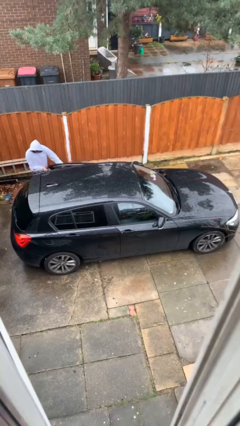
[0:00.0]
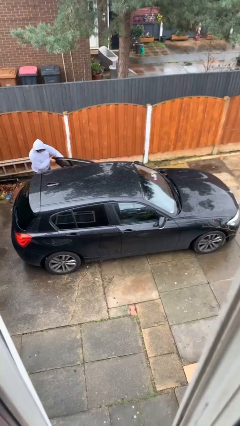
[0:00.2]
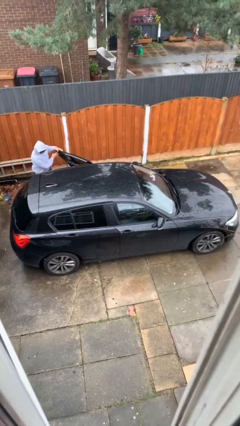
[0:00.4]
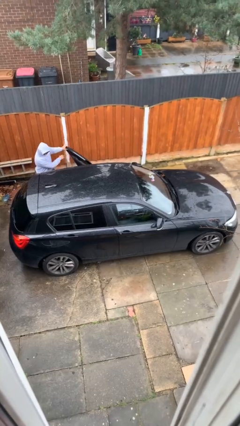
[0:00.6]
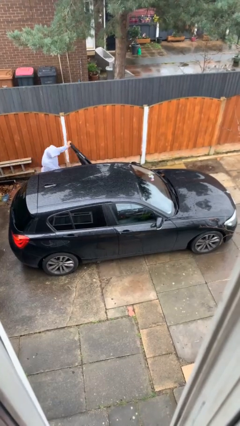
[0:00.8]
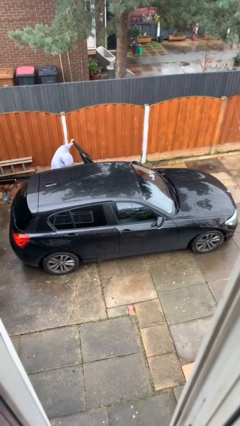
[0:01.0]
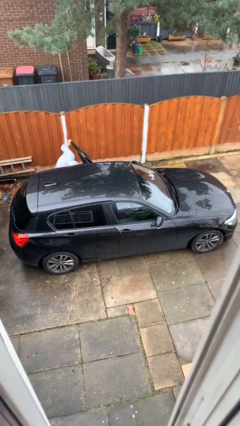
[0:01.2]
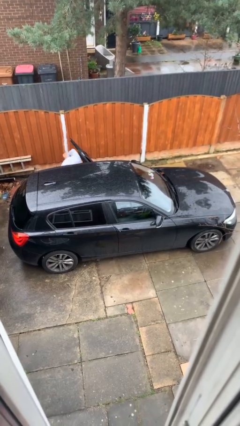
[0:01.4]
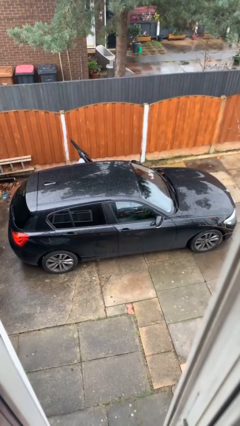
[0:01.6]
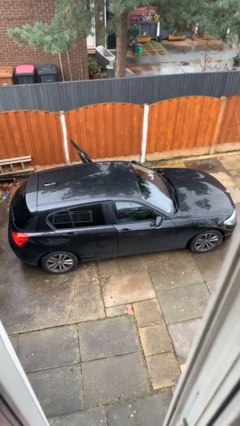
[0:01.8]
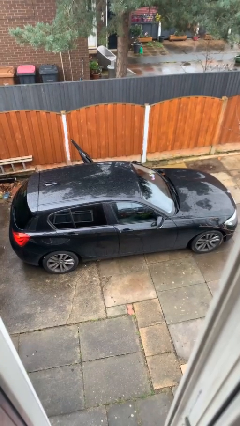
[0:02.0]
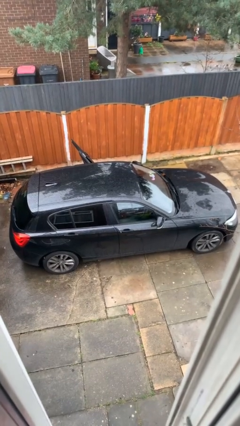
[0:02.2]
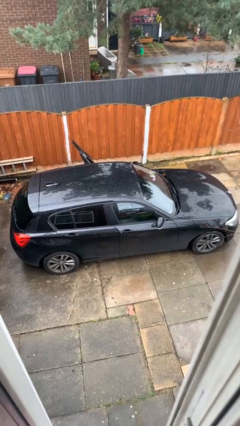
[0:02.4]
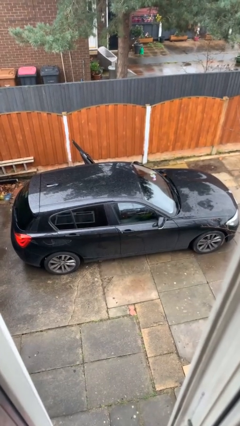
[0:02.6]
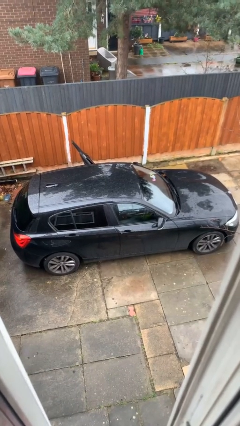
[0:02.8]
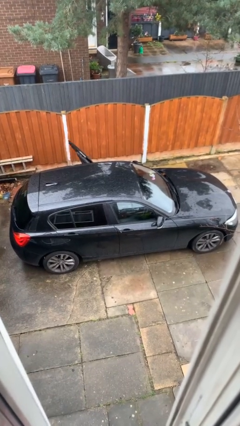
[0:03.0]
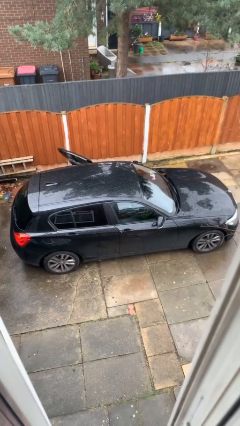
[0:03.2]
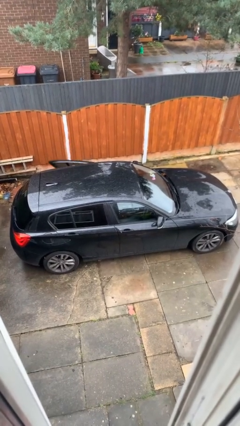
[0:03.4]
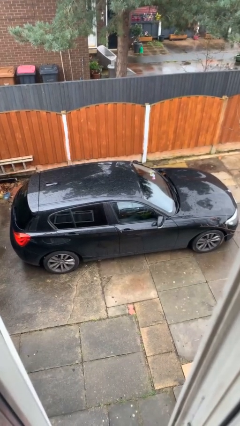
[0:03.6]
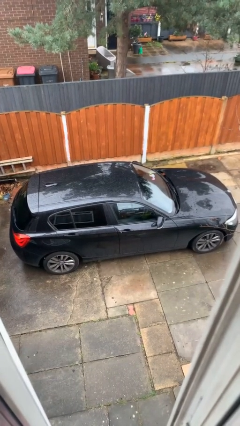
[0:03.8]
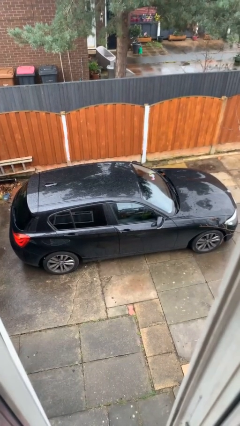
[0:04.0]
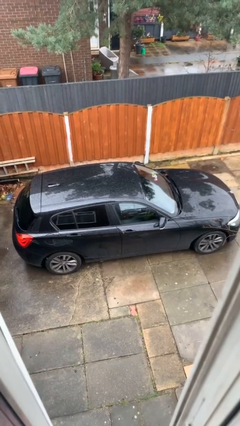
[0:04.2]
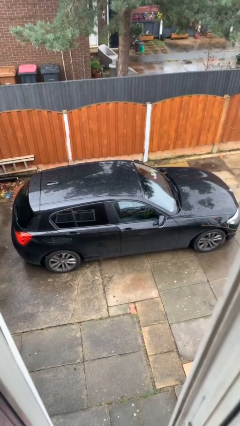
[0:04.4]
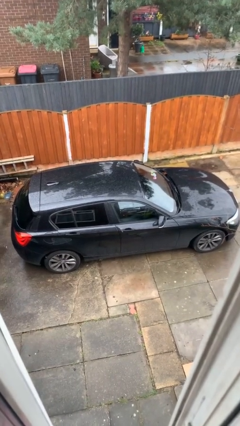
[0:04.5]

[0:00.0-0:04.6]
car picks up person

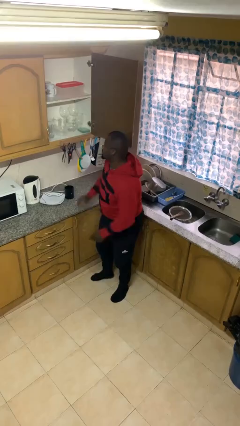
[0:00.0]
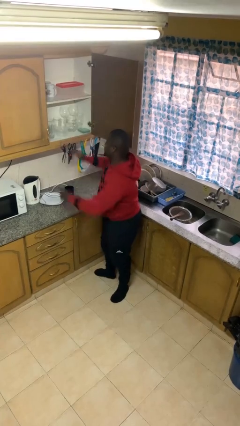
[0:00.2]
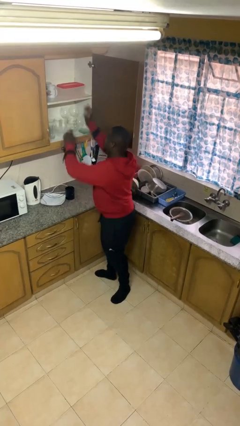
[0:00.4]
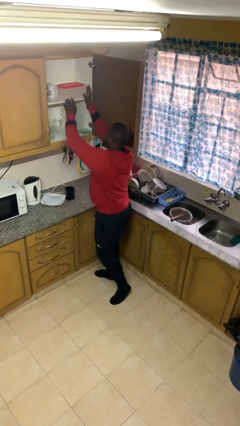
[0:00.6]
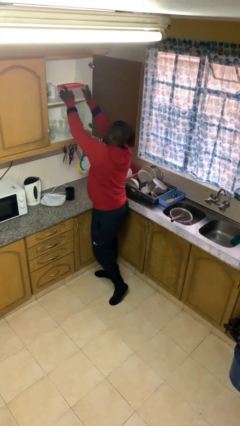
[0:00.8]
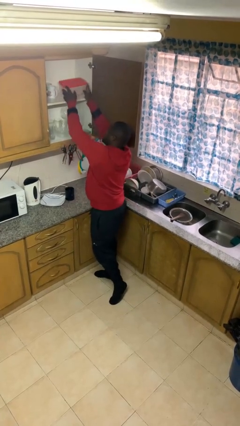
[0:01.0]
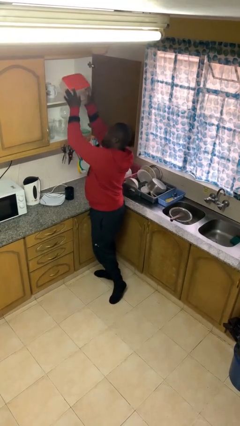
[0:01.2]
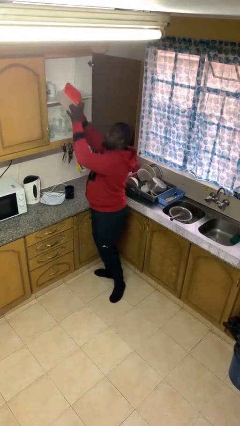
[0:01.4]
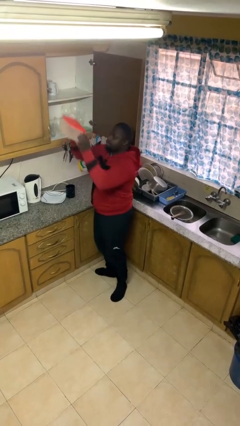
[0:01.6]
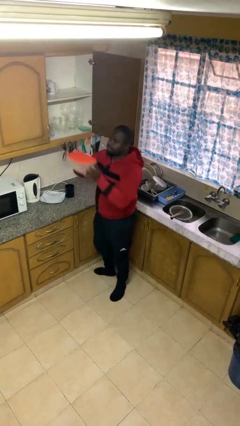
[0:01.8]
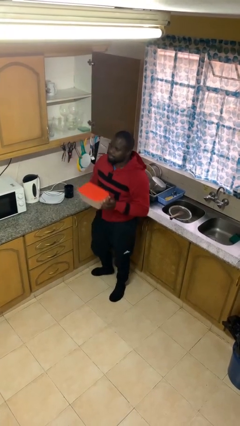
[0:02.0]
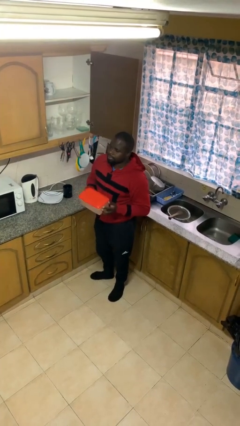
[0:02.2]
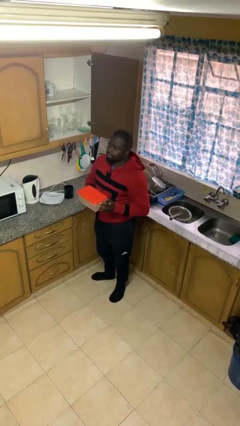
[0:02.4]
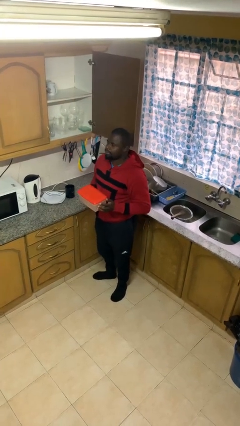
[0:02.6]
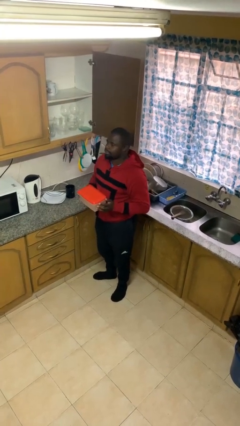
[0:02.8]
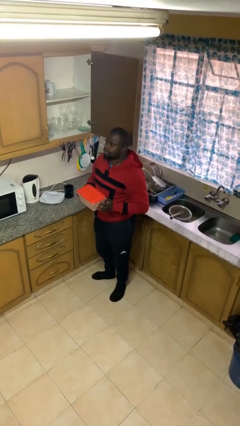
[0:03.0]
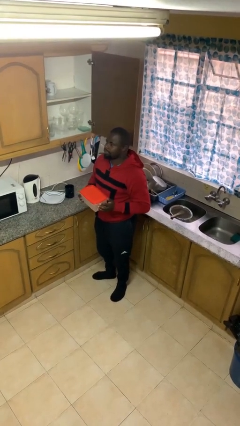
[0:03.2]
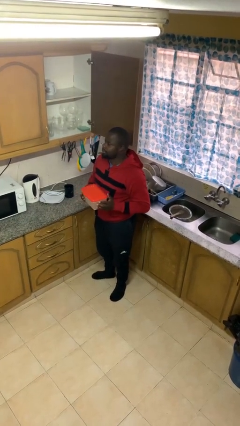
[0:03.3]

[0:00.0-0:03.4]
person picks up object from cabinet

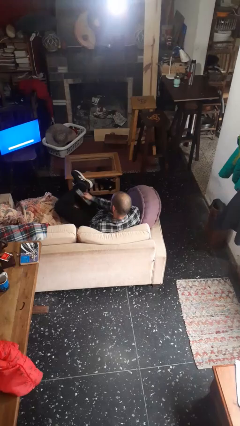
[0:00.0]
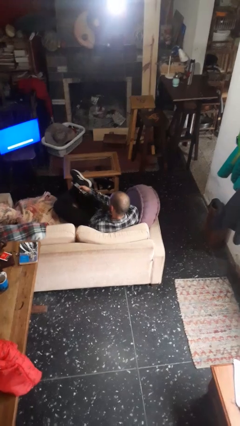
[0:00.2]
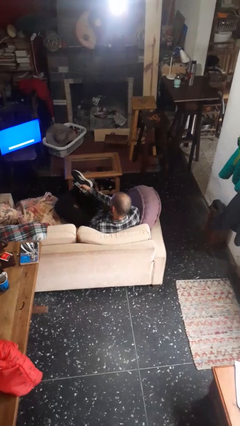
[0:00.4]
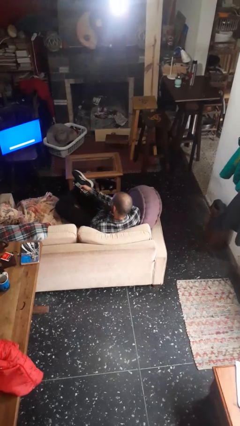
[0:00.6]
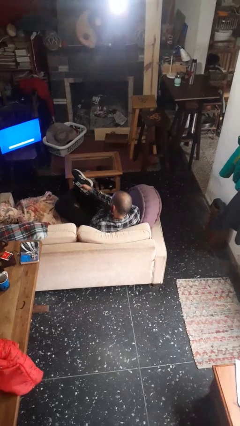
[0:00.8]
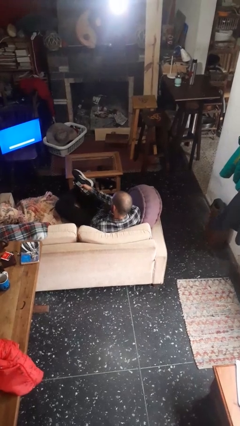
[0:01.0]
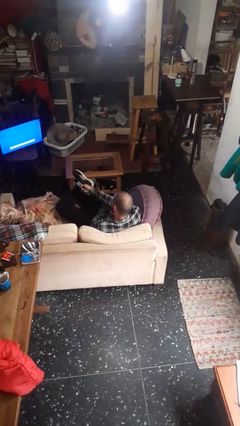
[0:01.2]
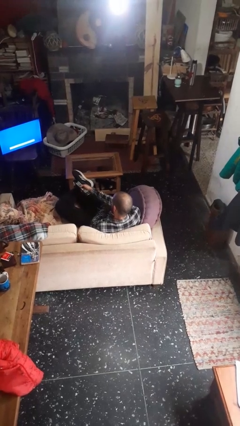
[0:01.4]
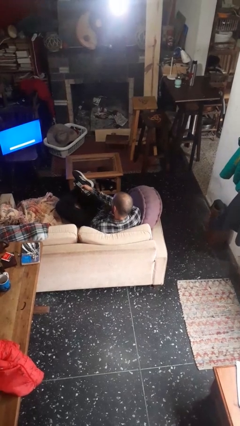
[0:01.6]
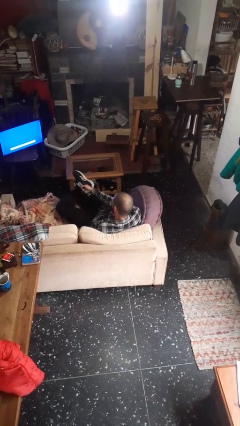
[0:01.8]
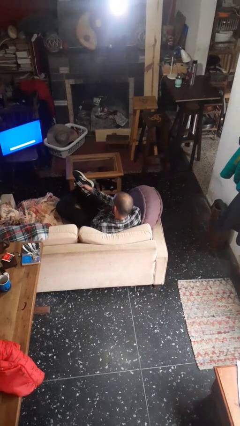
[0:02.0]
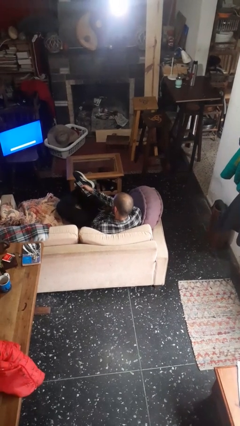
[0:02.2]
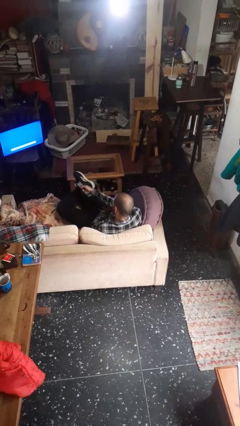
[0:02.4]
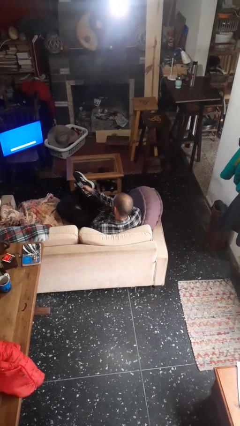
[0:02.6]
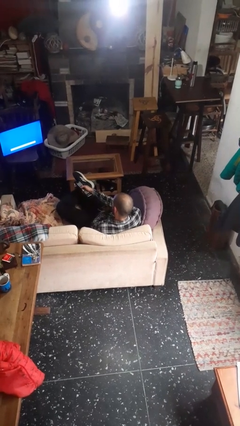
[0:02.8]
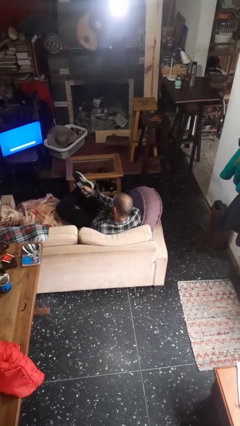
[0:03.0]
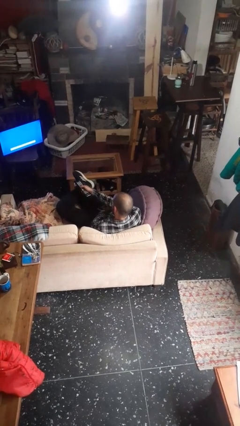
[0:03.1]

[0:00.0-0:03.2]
person uses television remote

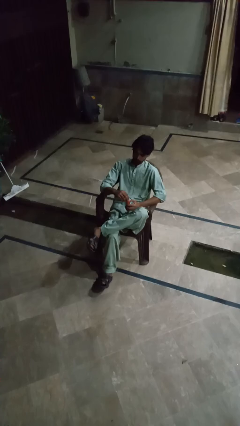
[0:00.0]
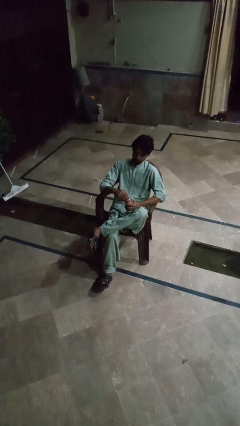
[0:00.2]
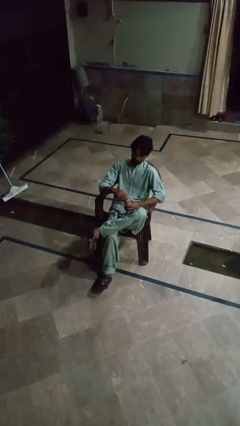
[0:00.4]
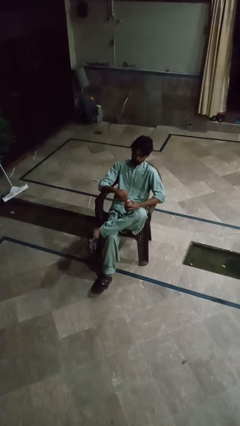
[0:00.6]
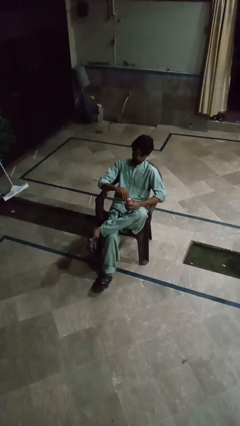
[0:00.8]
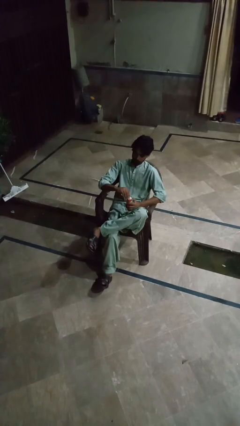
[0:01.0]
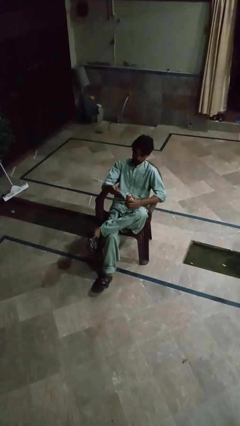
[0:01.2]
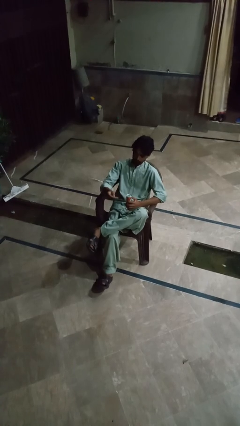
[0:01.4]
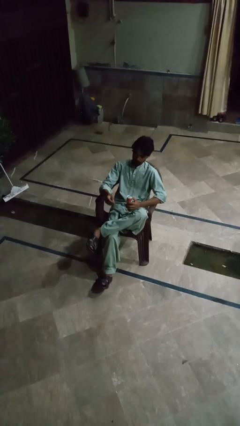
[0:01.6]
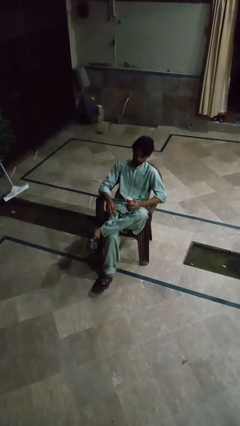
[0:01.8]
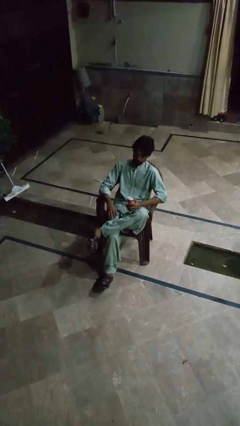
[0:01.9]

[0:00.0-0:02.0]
person opens can with can opener

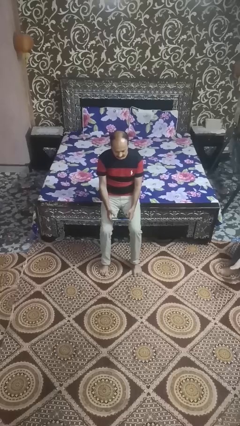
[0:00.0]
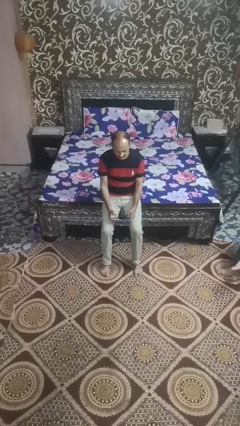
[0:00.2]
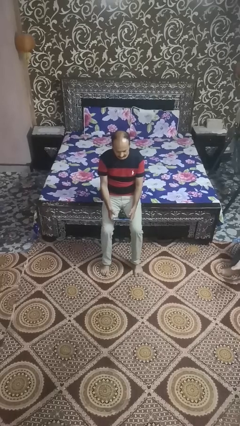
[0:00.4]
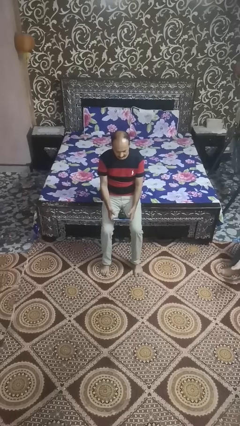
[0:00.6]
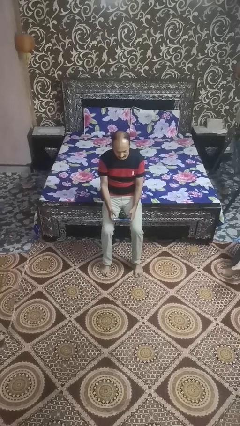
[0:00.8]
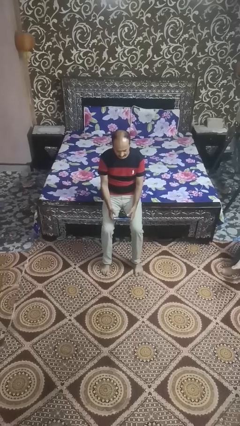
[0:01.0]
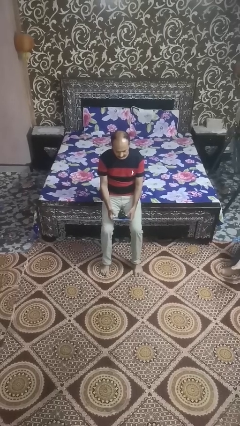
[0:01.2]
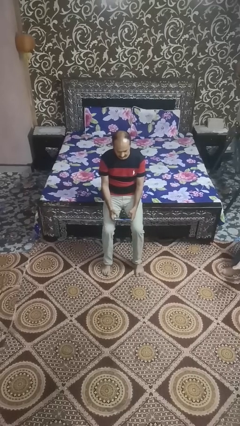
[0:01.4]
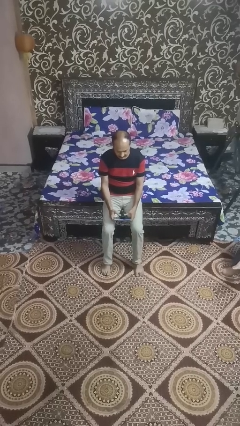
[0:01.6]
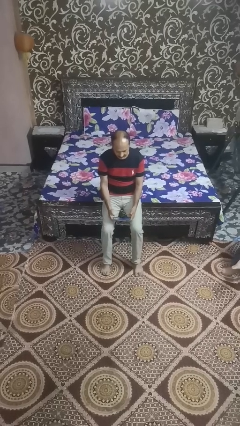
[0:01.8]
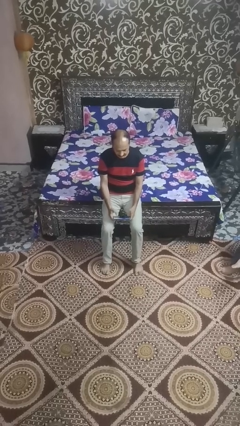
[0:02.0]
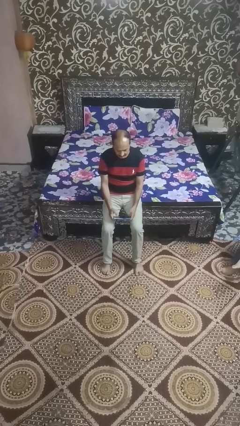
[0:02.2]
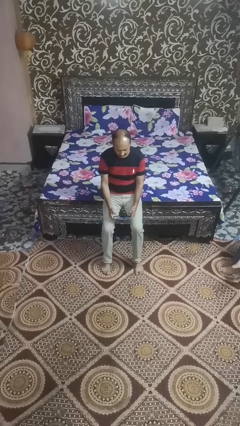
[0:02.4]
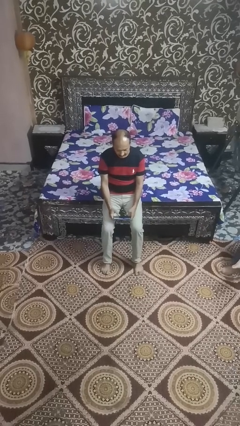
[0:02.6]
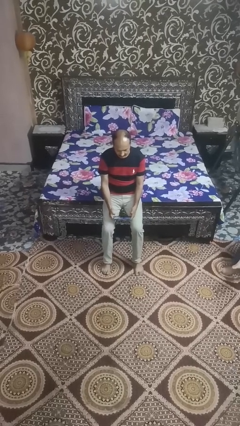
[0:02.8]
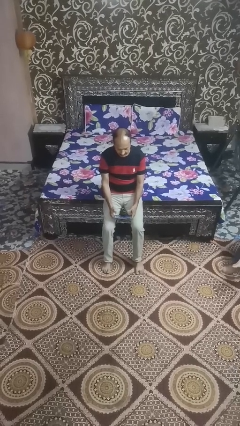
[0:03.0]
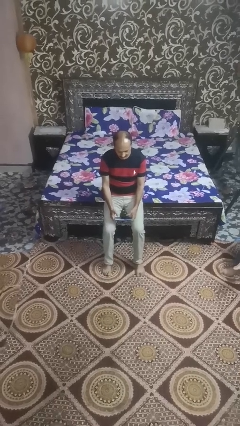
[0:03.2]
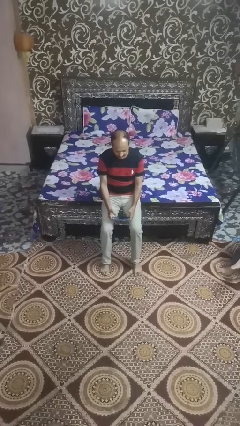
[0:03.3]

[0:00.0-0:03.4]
person interacts with handheld game

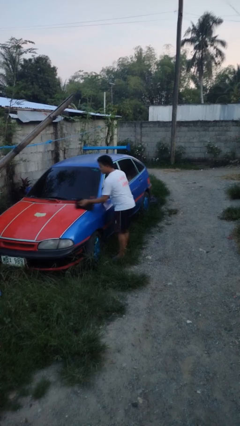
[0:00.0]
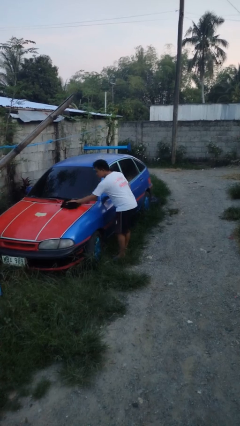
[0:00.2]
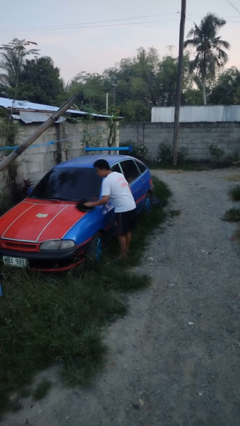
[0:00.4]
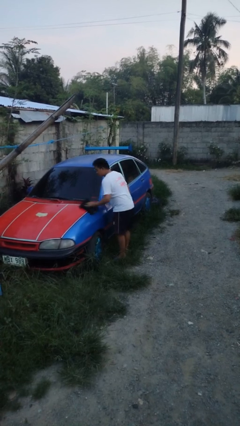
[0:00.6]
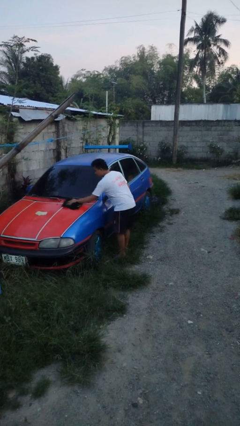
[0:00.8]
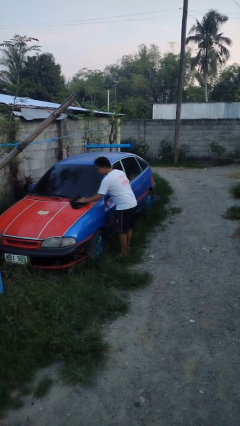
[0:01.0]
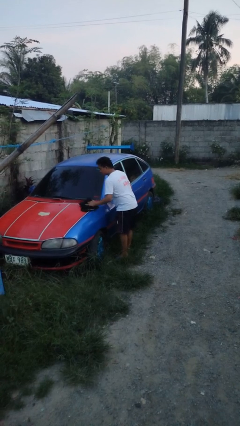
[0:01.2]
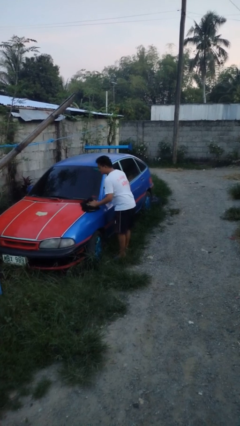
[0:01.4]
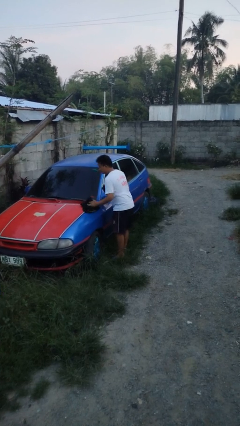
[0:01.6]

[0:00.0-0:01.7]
person polishes car with rag
